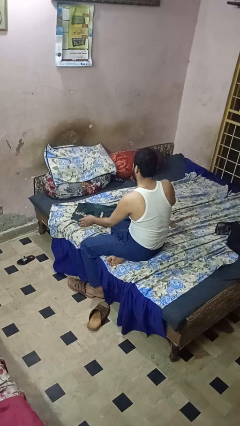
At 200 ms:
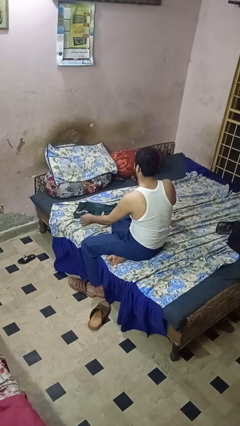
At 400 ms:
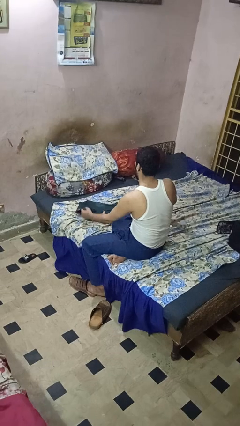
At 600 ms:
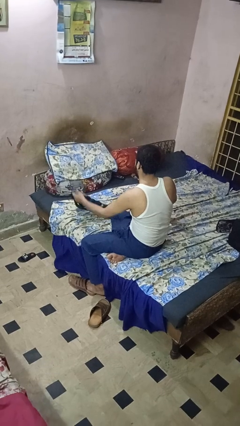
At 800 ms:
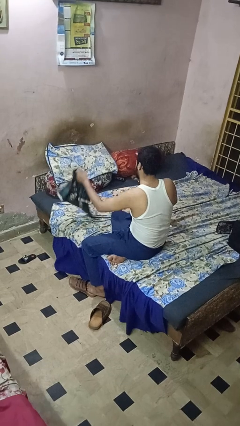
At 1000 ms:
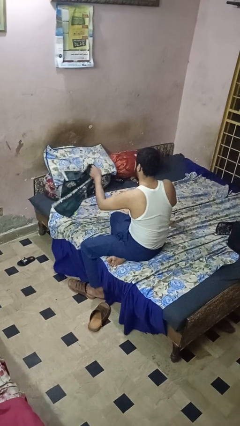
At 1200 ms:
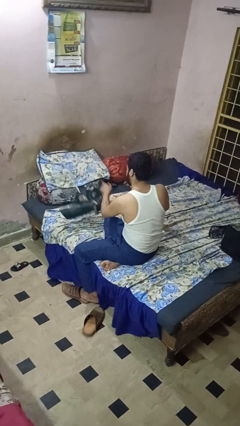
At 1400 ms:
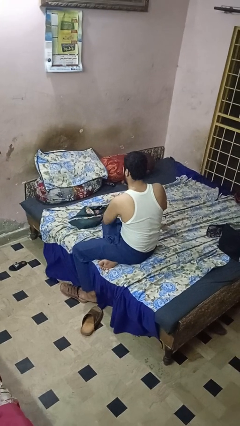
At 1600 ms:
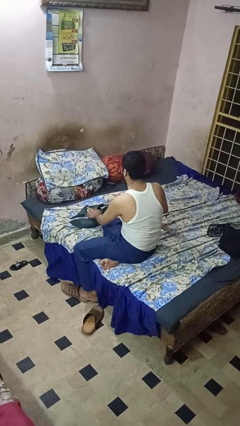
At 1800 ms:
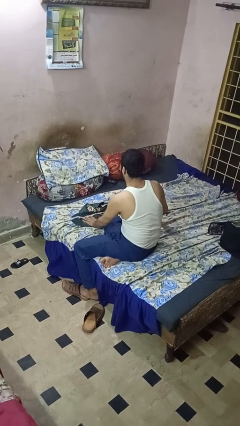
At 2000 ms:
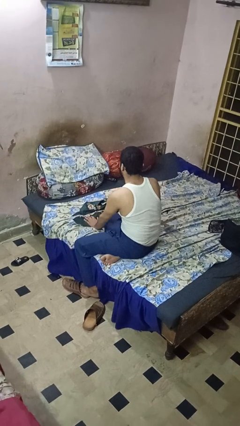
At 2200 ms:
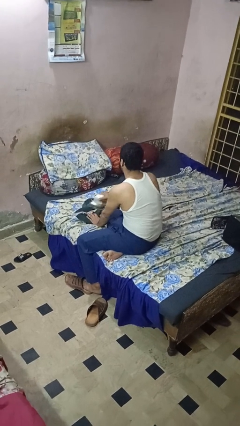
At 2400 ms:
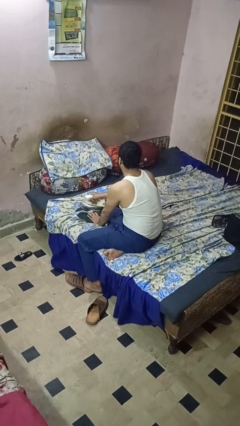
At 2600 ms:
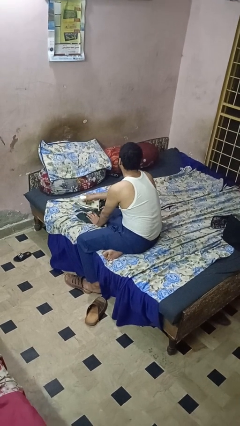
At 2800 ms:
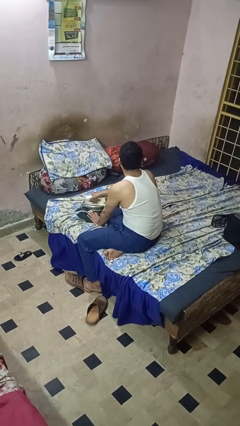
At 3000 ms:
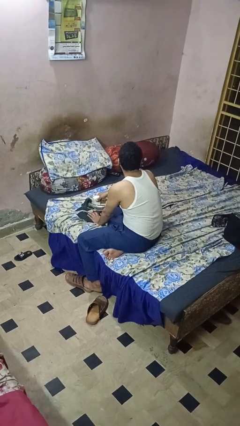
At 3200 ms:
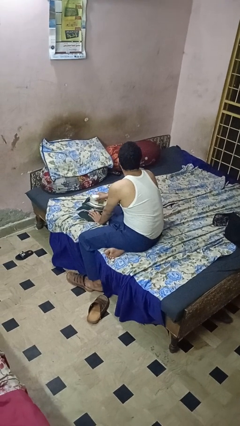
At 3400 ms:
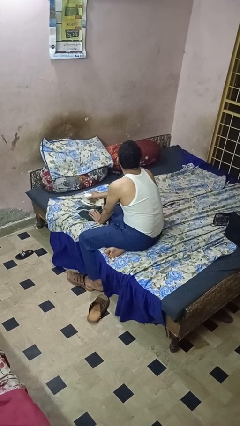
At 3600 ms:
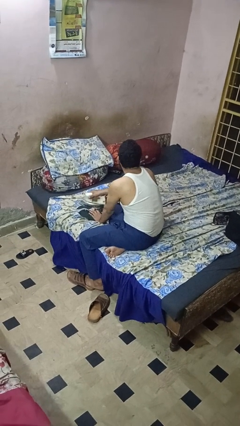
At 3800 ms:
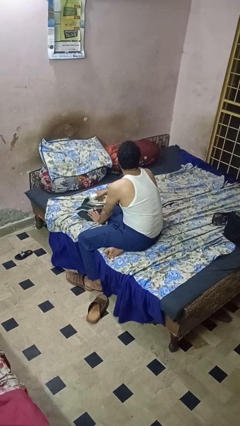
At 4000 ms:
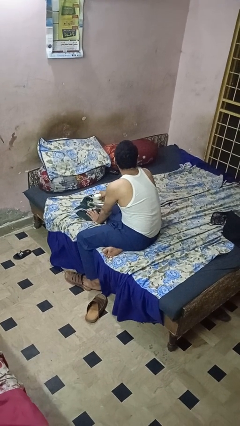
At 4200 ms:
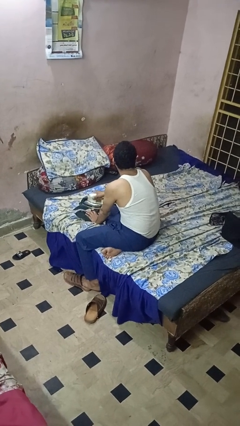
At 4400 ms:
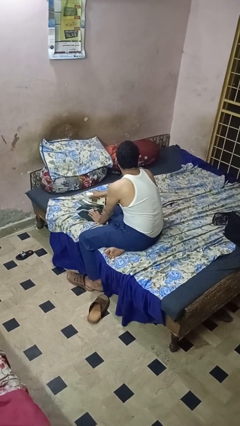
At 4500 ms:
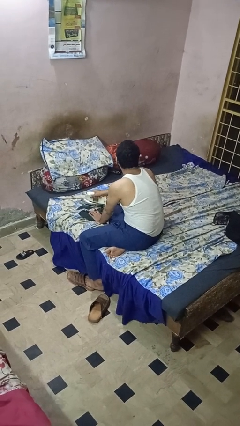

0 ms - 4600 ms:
person irons clothes

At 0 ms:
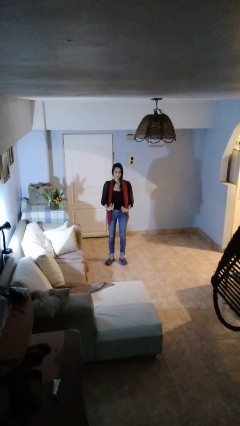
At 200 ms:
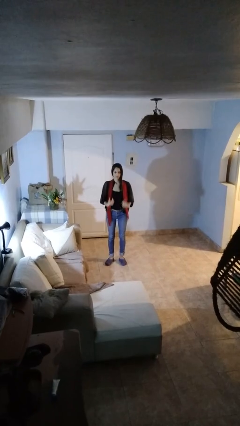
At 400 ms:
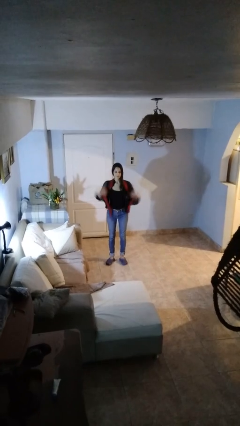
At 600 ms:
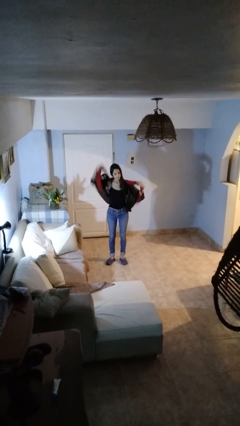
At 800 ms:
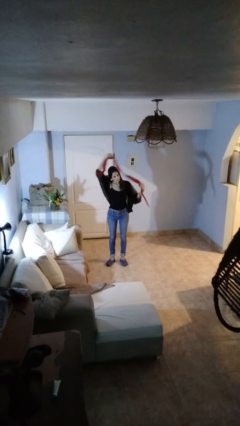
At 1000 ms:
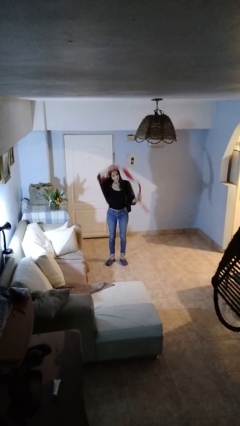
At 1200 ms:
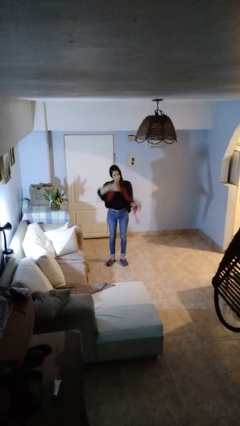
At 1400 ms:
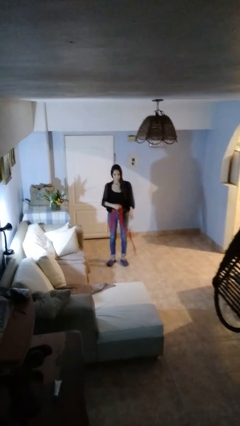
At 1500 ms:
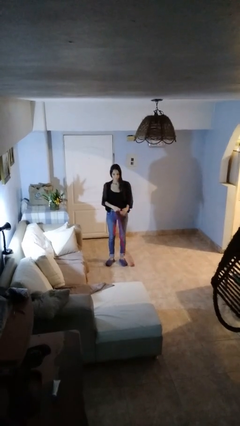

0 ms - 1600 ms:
person takes off scarf

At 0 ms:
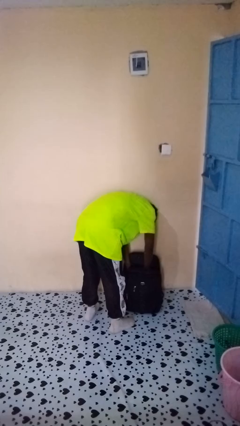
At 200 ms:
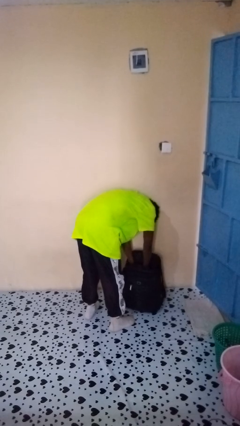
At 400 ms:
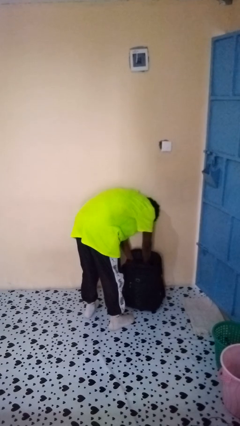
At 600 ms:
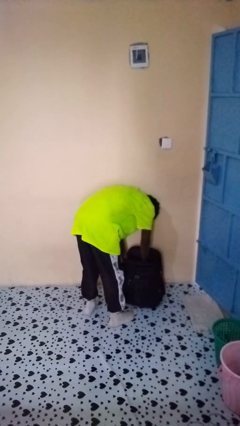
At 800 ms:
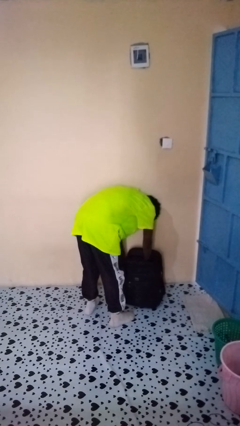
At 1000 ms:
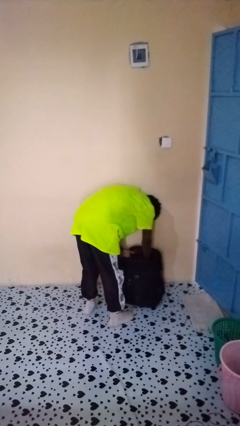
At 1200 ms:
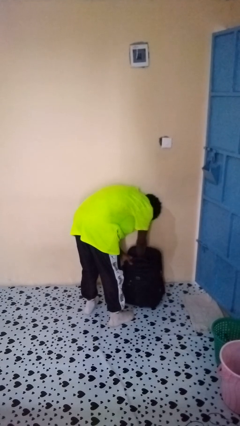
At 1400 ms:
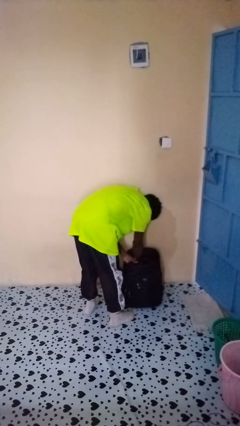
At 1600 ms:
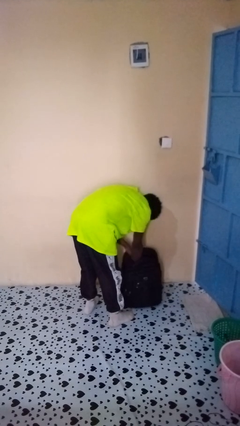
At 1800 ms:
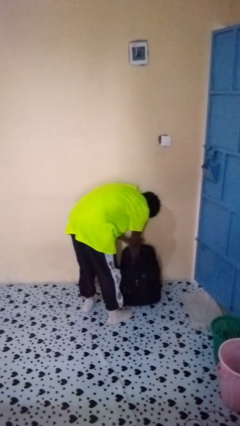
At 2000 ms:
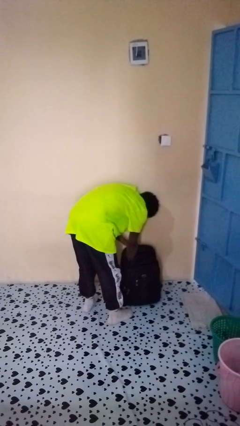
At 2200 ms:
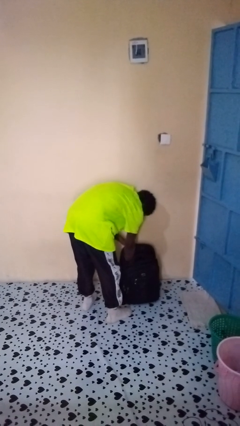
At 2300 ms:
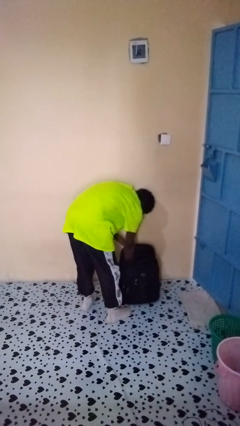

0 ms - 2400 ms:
person searches in backpack

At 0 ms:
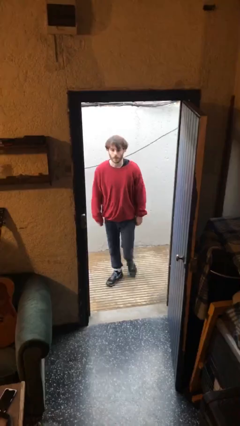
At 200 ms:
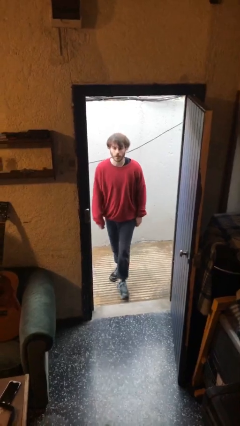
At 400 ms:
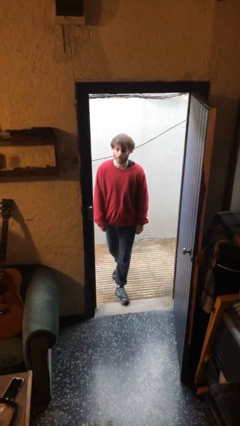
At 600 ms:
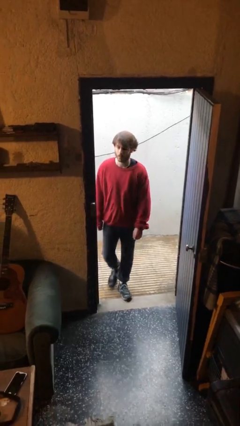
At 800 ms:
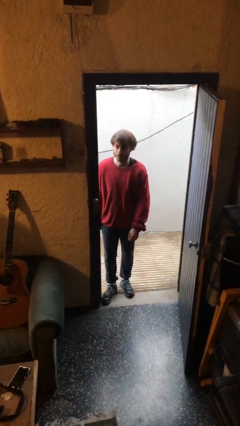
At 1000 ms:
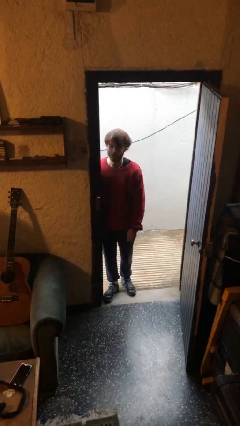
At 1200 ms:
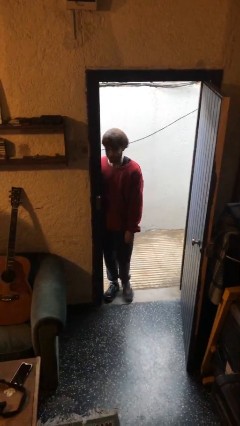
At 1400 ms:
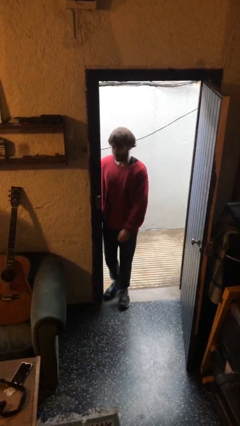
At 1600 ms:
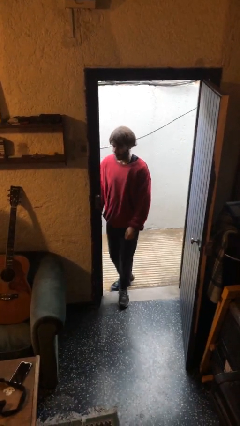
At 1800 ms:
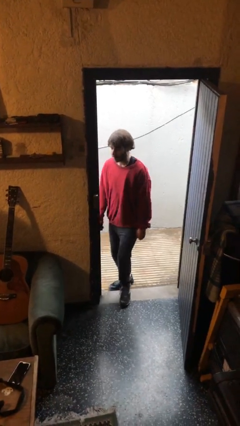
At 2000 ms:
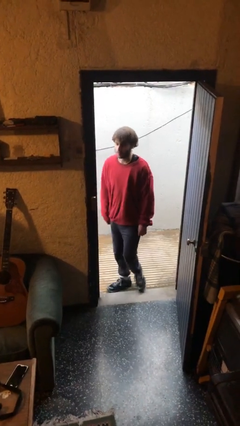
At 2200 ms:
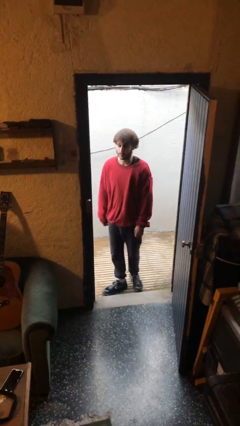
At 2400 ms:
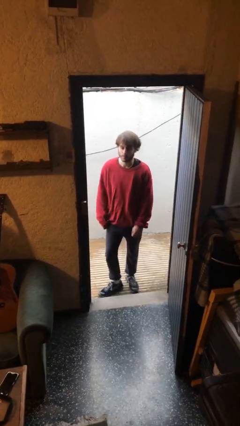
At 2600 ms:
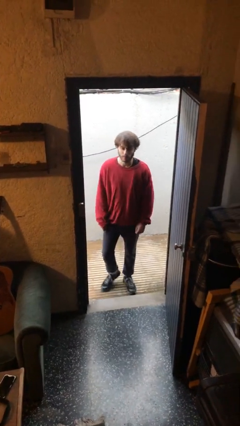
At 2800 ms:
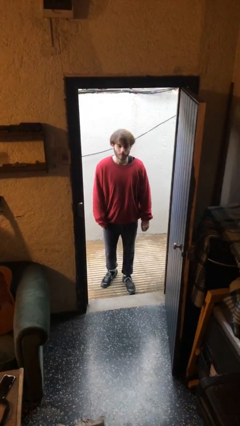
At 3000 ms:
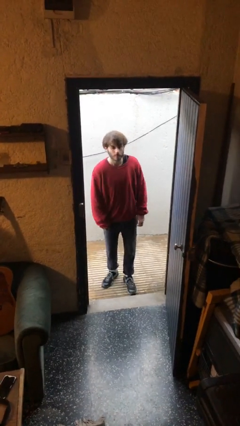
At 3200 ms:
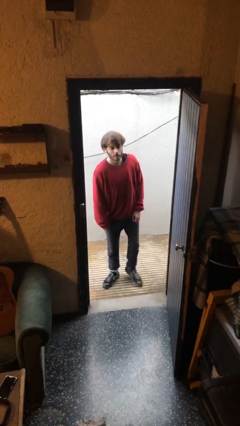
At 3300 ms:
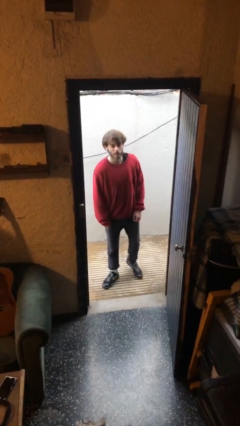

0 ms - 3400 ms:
person bumps into wall

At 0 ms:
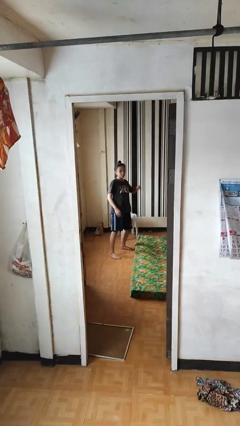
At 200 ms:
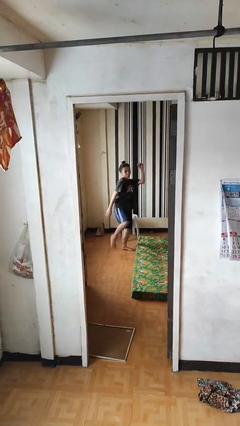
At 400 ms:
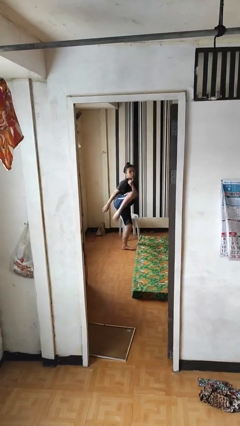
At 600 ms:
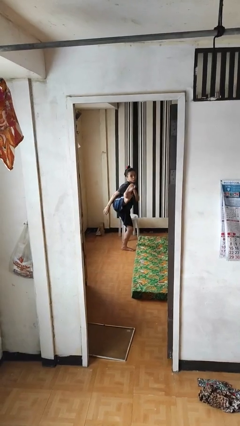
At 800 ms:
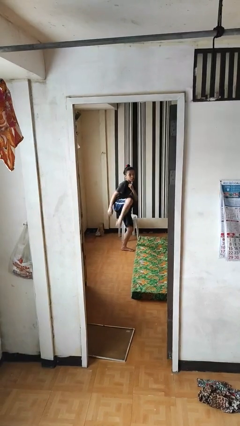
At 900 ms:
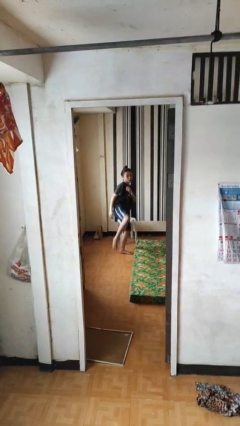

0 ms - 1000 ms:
person karate kicks

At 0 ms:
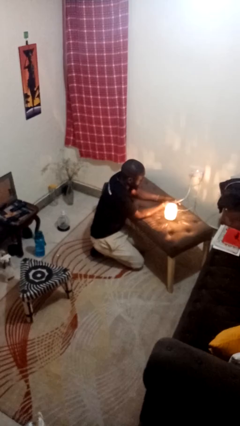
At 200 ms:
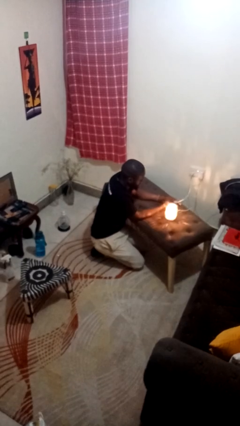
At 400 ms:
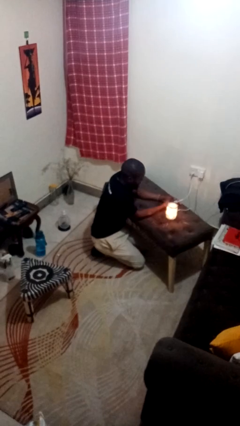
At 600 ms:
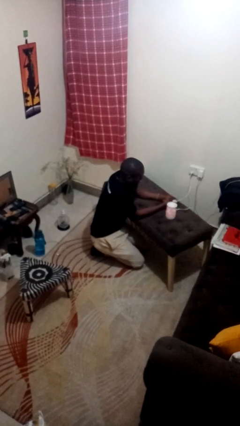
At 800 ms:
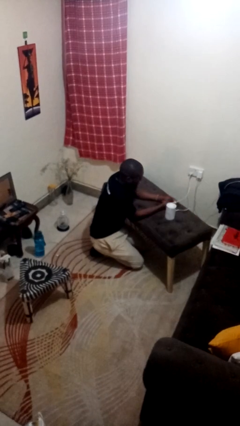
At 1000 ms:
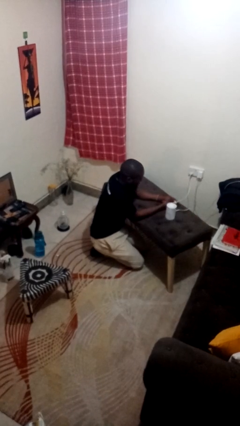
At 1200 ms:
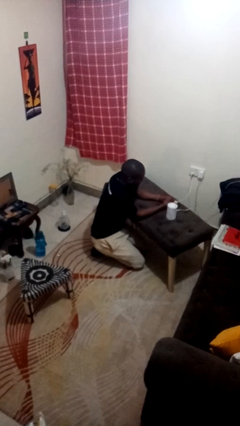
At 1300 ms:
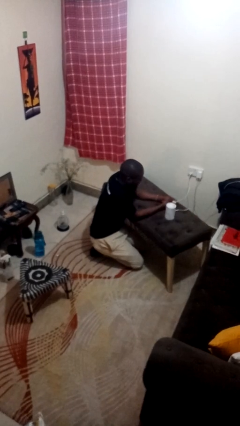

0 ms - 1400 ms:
person turns off lamp

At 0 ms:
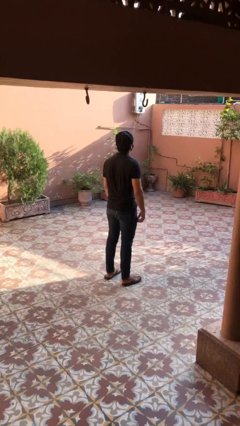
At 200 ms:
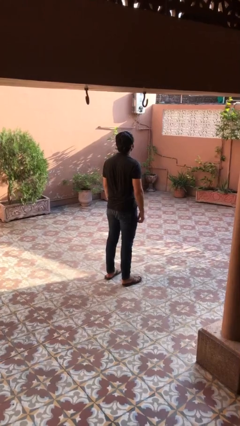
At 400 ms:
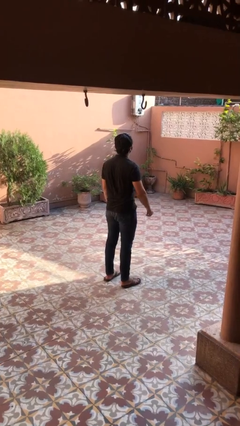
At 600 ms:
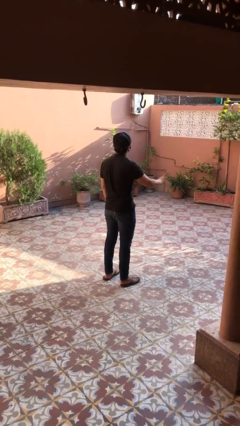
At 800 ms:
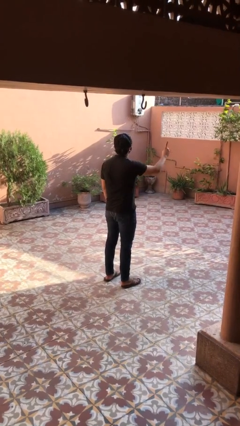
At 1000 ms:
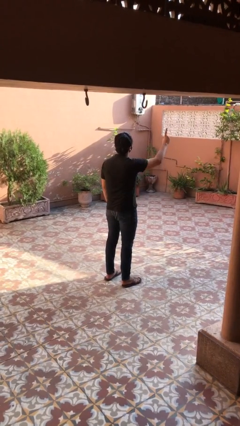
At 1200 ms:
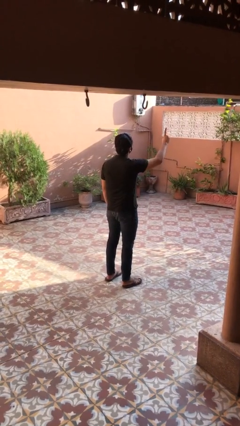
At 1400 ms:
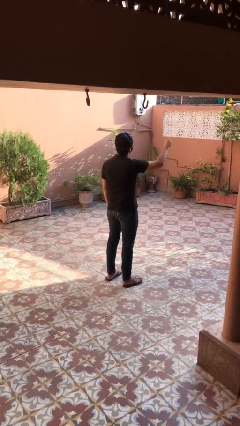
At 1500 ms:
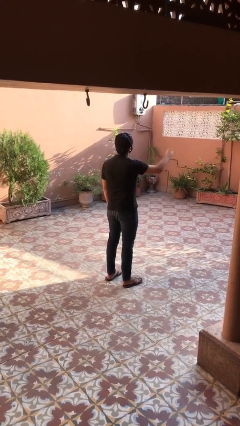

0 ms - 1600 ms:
person gestures number one

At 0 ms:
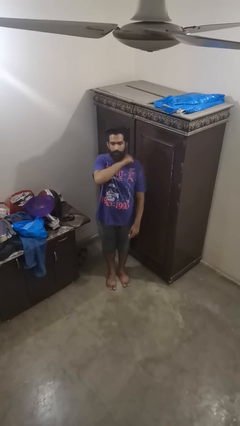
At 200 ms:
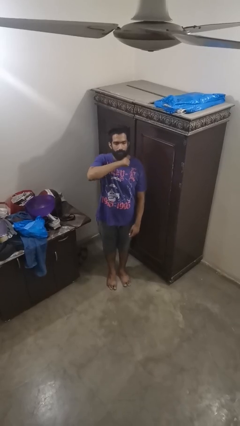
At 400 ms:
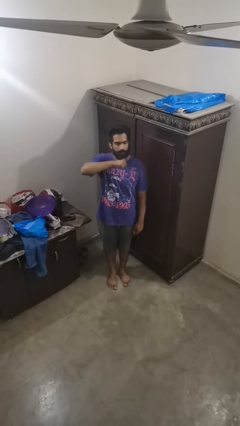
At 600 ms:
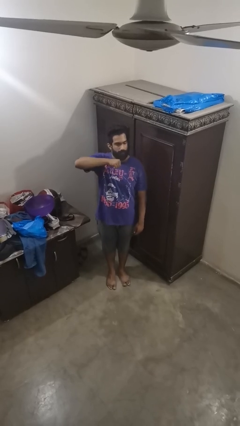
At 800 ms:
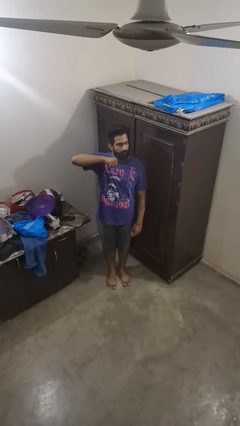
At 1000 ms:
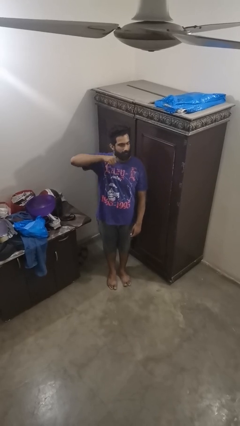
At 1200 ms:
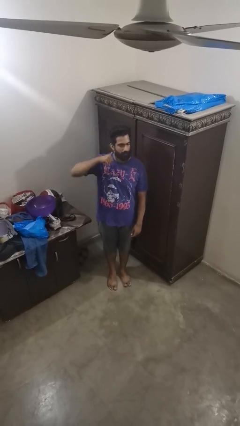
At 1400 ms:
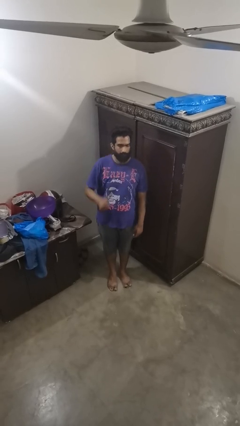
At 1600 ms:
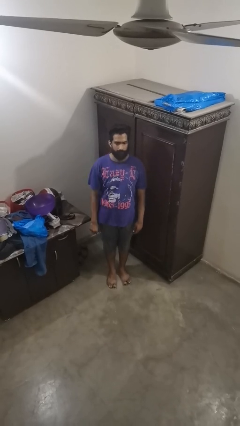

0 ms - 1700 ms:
person gestures cut
